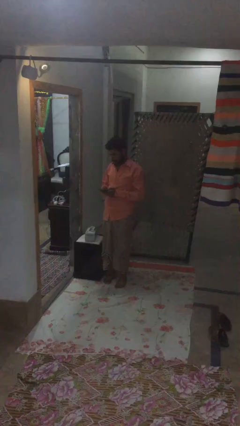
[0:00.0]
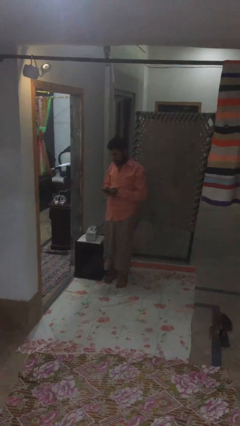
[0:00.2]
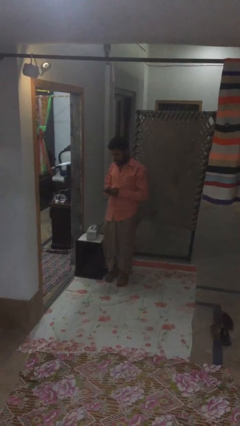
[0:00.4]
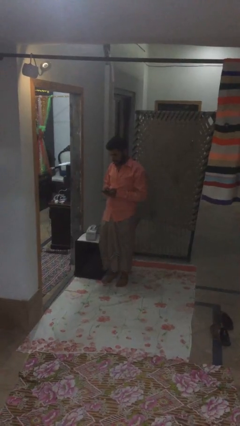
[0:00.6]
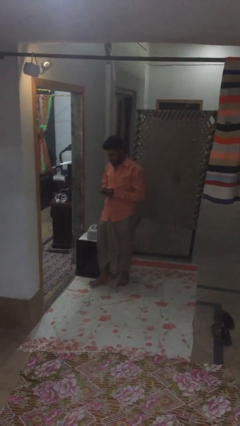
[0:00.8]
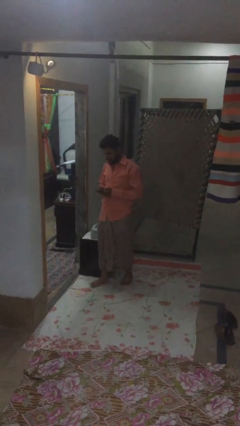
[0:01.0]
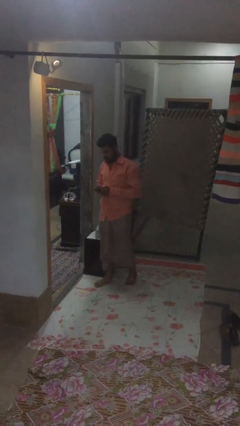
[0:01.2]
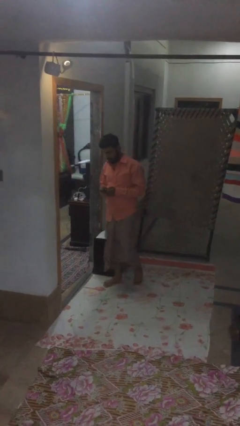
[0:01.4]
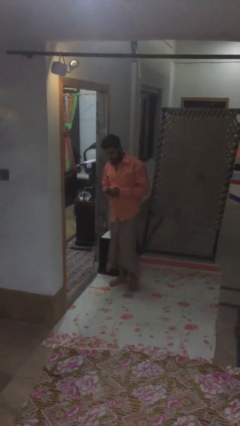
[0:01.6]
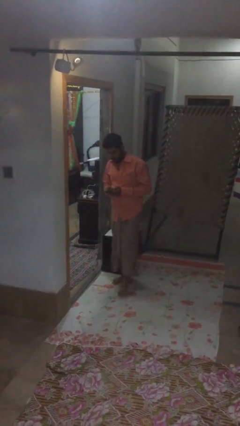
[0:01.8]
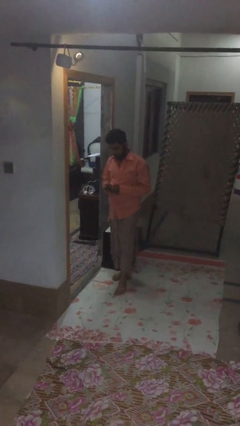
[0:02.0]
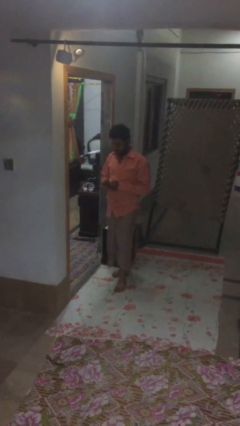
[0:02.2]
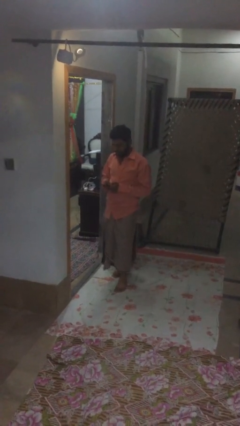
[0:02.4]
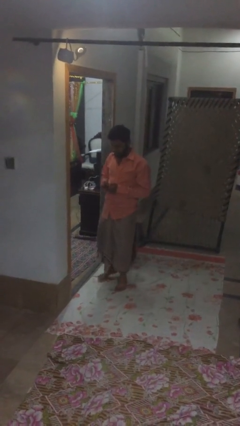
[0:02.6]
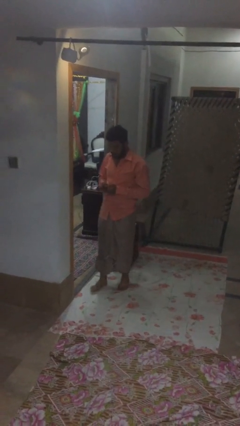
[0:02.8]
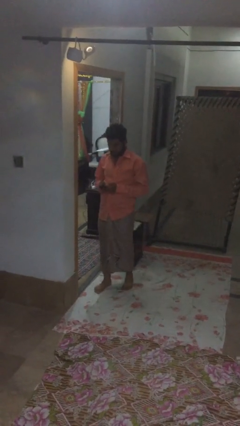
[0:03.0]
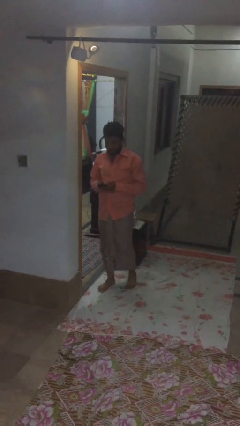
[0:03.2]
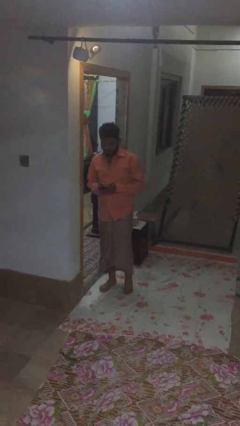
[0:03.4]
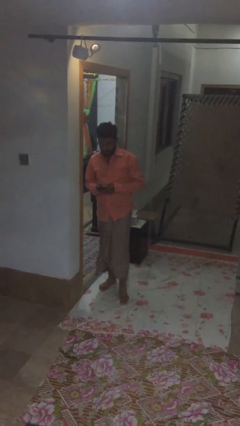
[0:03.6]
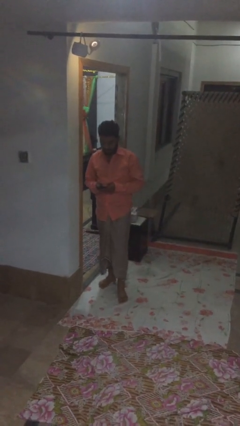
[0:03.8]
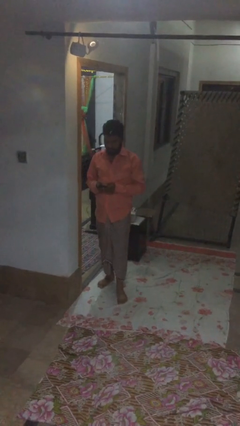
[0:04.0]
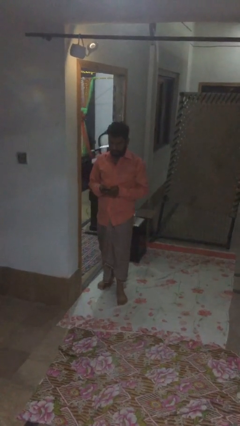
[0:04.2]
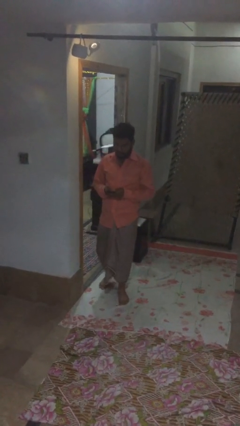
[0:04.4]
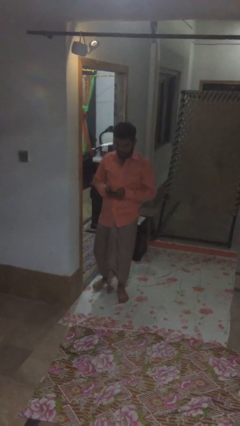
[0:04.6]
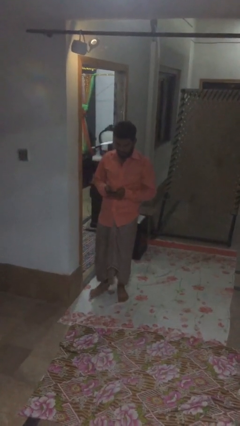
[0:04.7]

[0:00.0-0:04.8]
person texts on phone

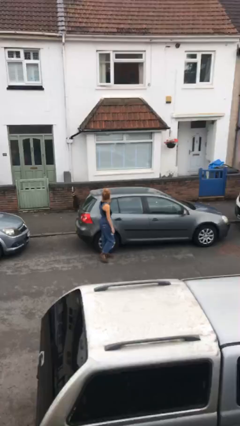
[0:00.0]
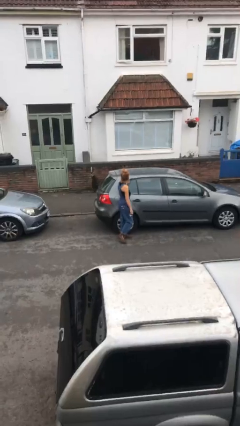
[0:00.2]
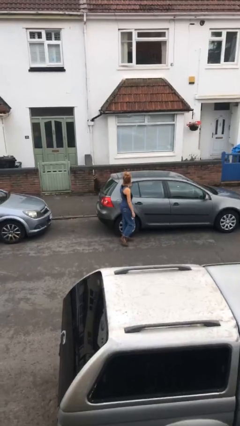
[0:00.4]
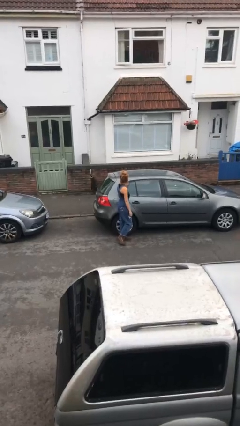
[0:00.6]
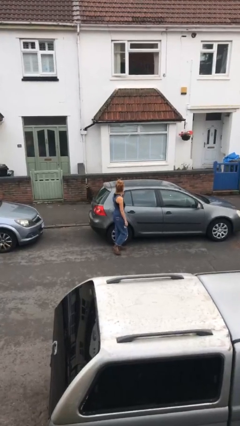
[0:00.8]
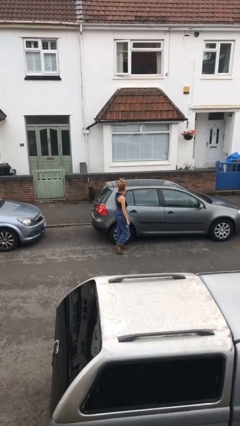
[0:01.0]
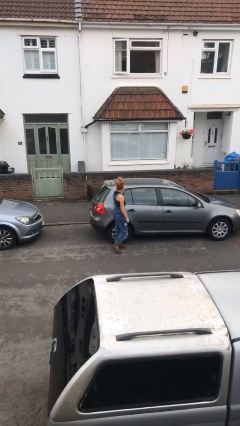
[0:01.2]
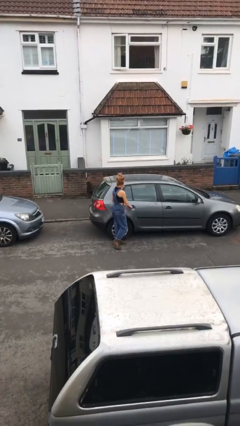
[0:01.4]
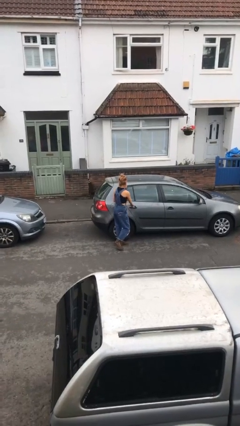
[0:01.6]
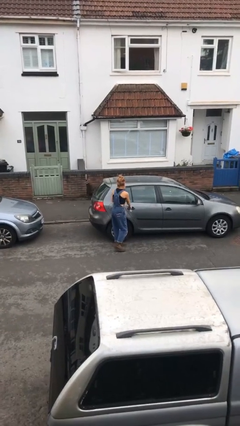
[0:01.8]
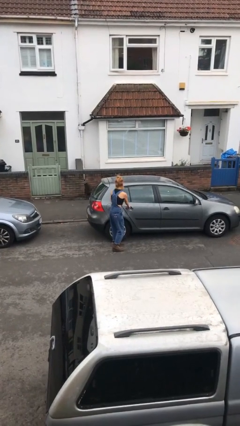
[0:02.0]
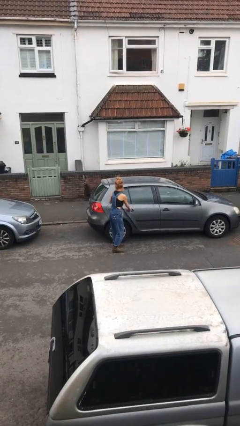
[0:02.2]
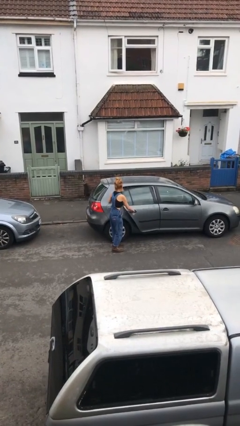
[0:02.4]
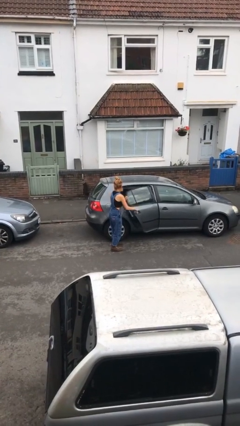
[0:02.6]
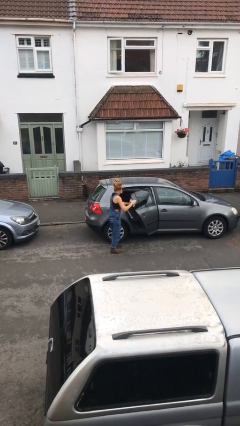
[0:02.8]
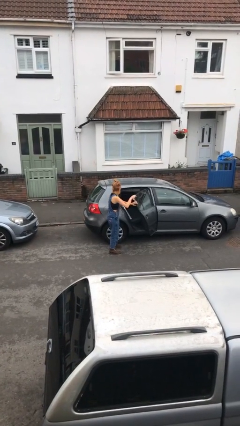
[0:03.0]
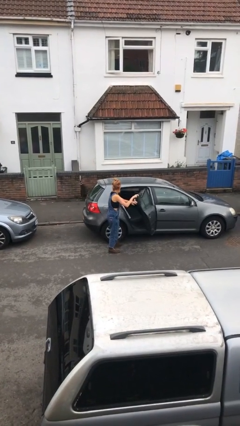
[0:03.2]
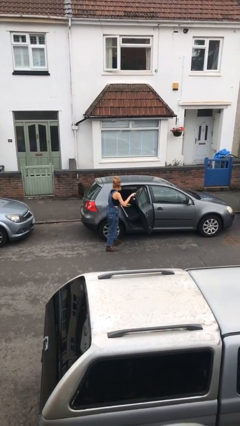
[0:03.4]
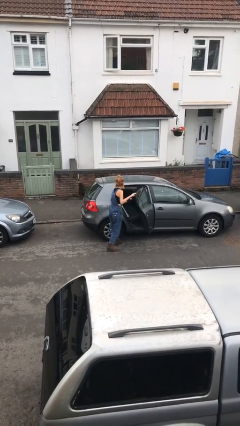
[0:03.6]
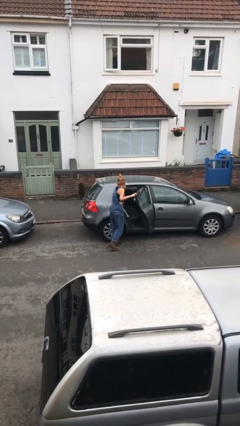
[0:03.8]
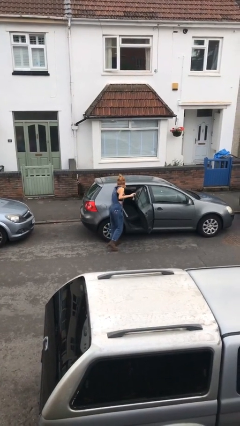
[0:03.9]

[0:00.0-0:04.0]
person opens car door

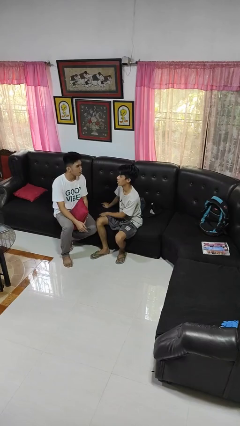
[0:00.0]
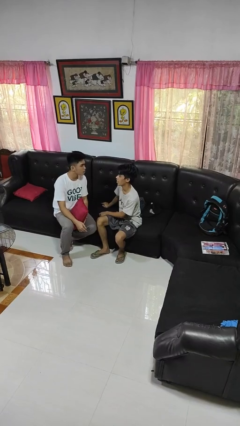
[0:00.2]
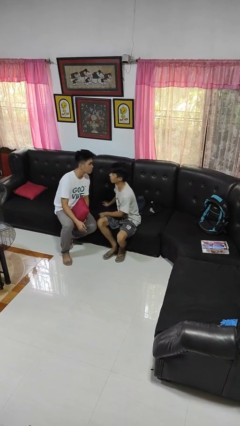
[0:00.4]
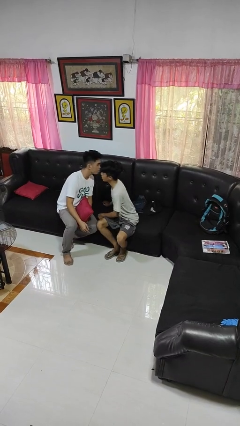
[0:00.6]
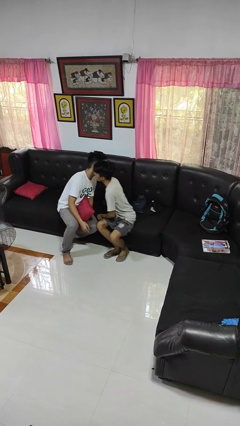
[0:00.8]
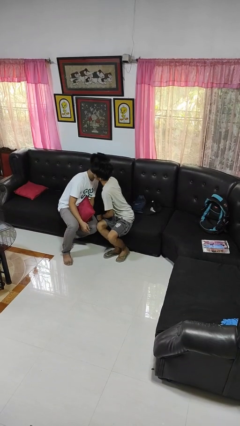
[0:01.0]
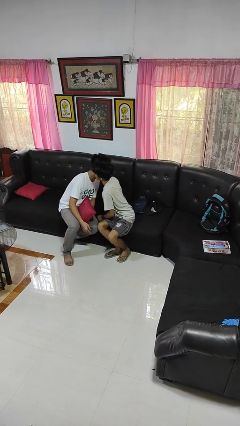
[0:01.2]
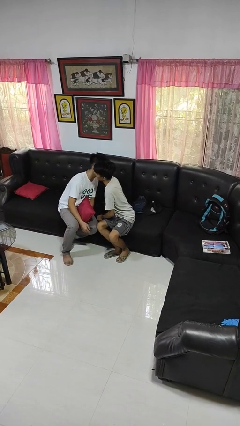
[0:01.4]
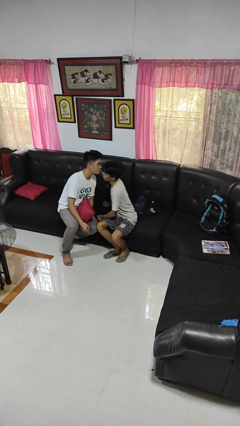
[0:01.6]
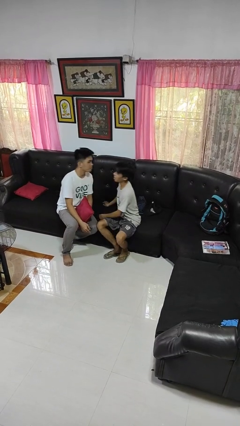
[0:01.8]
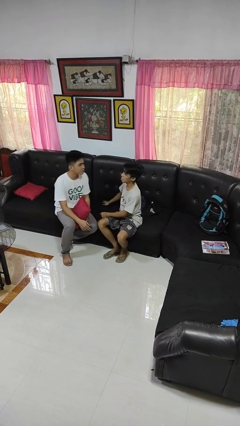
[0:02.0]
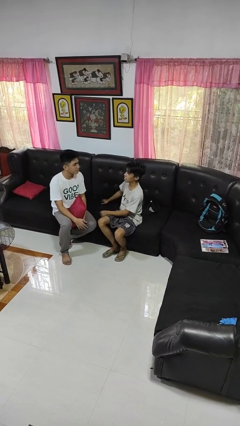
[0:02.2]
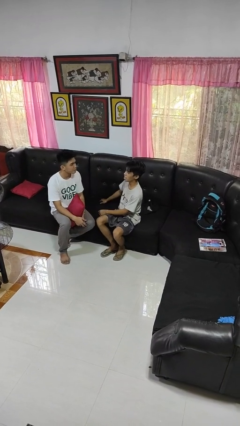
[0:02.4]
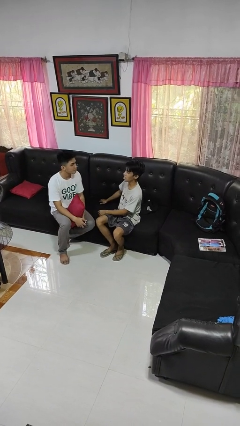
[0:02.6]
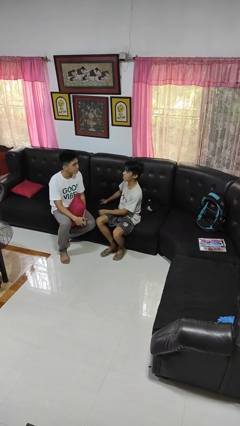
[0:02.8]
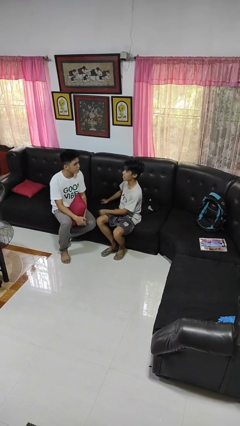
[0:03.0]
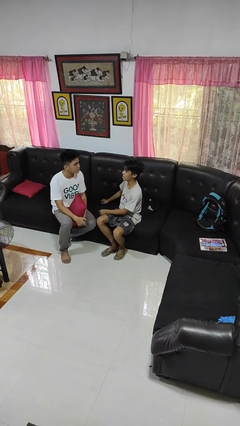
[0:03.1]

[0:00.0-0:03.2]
person kisses cheek of person

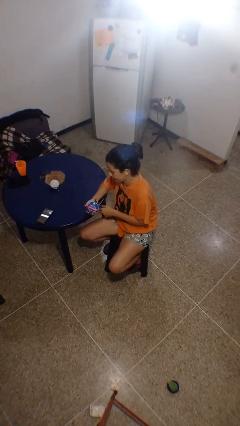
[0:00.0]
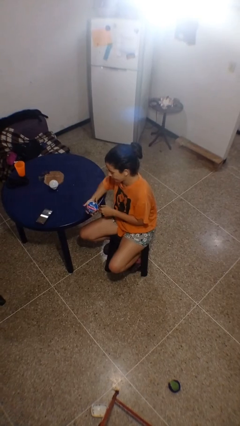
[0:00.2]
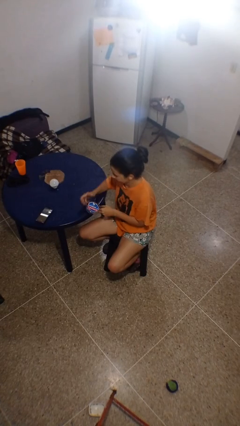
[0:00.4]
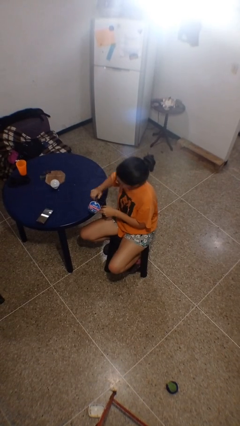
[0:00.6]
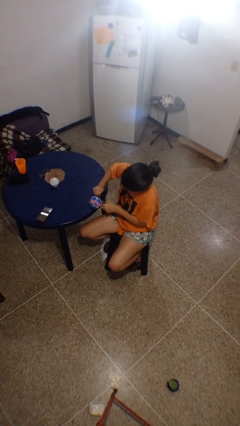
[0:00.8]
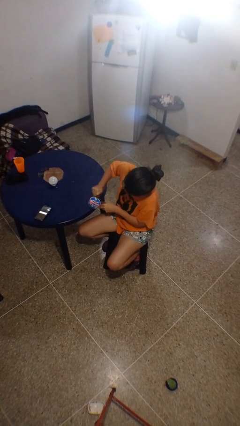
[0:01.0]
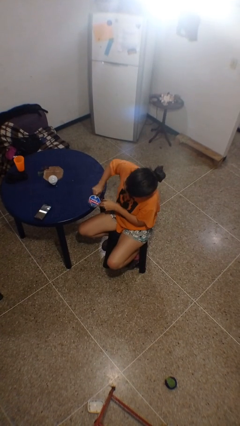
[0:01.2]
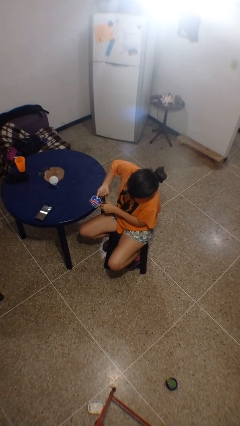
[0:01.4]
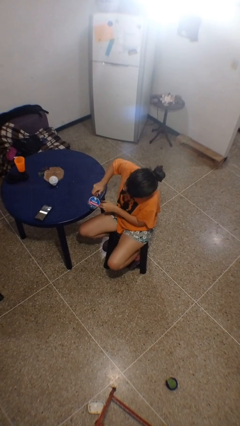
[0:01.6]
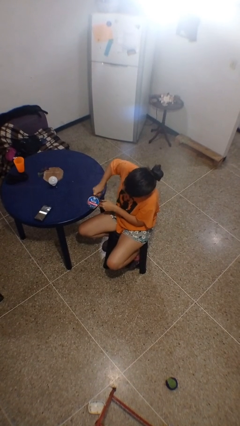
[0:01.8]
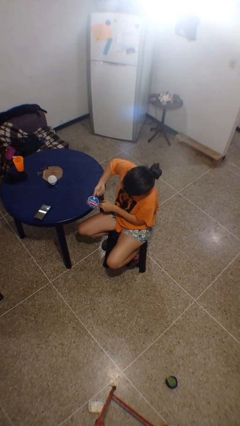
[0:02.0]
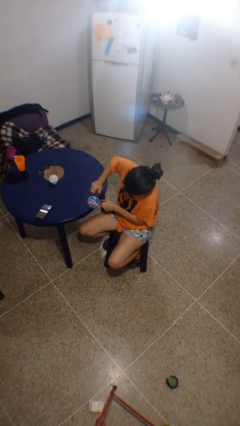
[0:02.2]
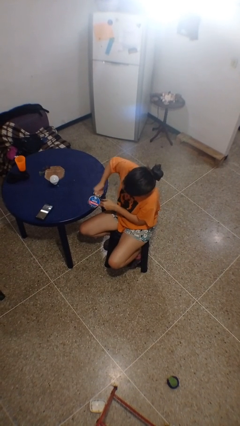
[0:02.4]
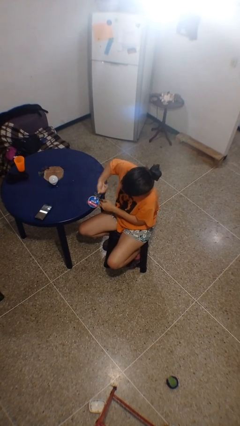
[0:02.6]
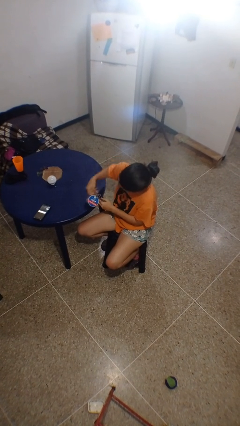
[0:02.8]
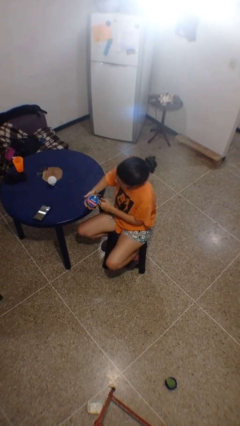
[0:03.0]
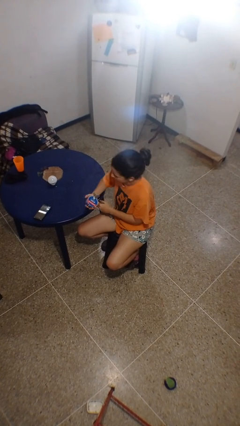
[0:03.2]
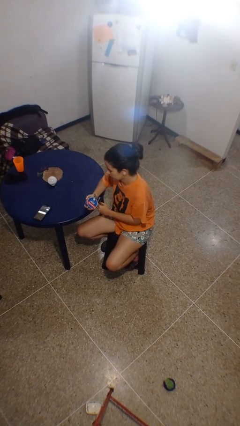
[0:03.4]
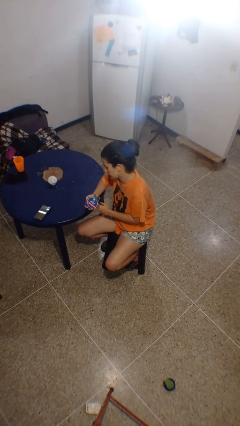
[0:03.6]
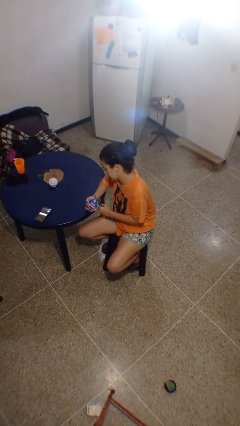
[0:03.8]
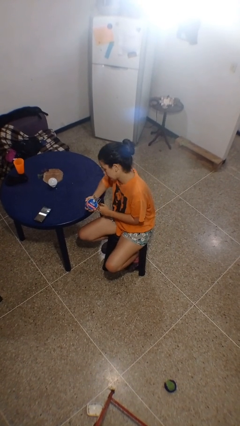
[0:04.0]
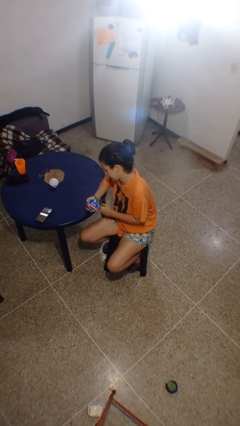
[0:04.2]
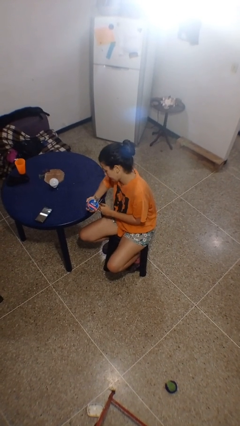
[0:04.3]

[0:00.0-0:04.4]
person opens can with can opener

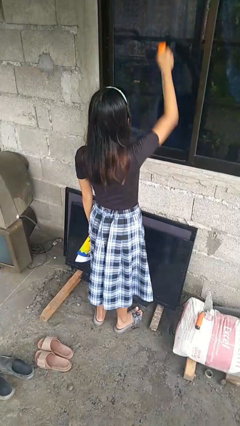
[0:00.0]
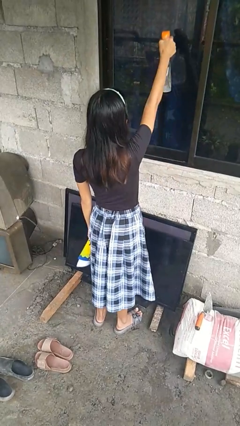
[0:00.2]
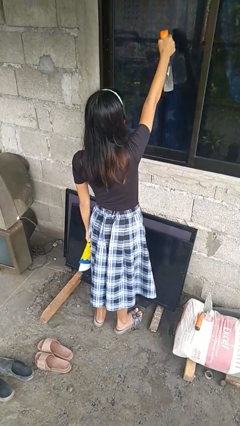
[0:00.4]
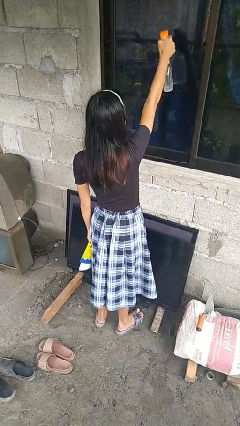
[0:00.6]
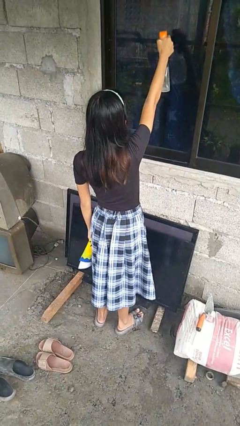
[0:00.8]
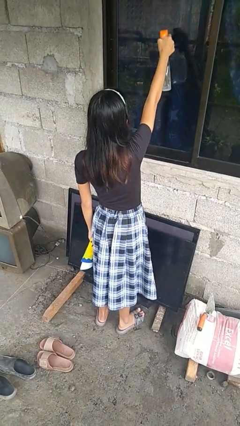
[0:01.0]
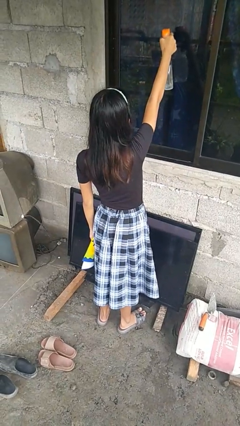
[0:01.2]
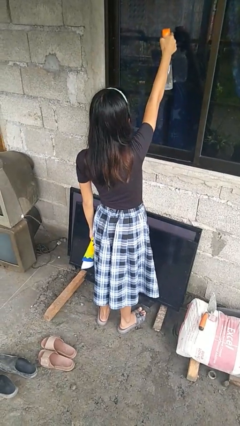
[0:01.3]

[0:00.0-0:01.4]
person sprays from bottle
